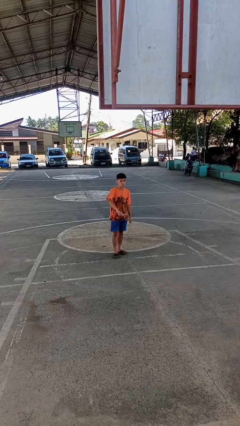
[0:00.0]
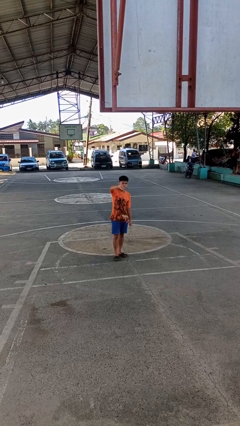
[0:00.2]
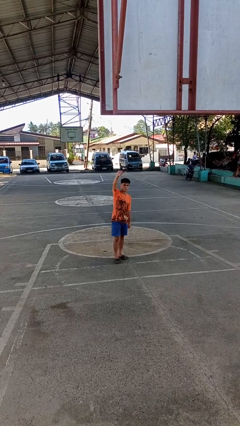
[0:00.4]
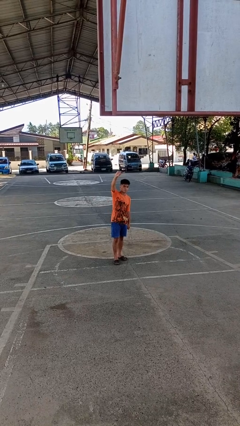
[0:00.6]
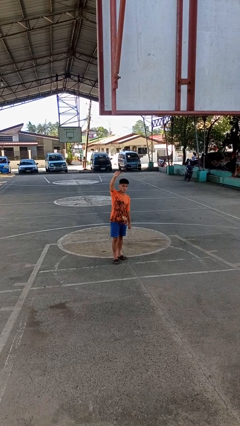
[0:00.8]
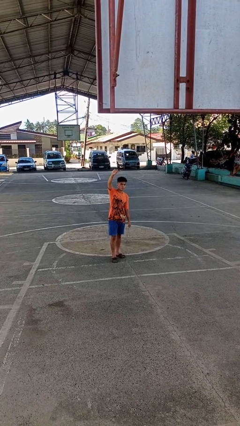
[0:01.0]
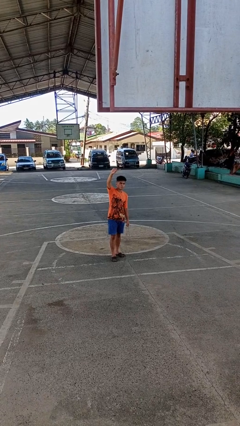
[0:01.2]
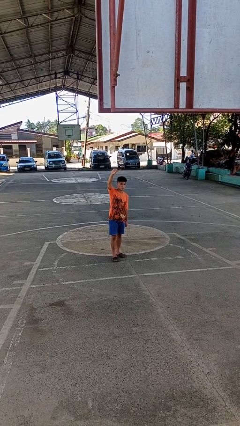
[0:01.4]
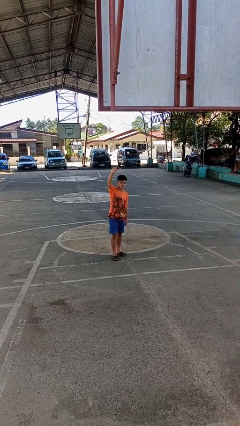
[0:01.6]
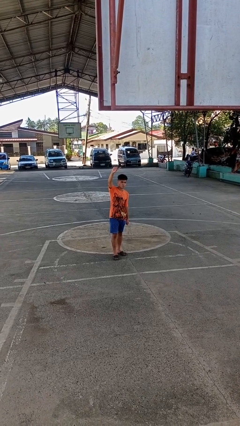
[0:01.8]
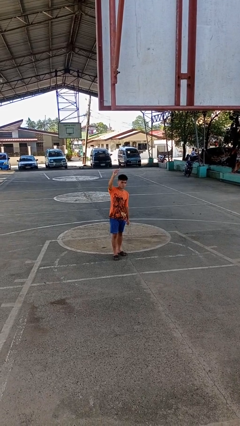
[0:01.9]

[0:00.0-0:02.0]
person gestures swipe up

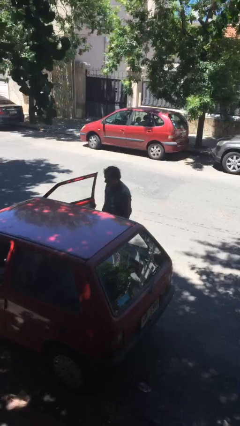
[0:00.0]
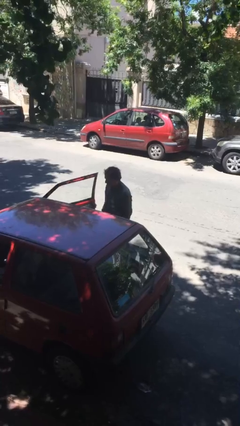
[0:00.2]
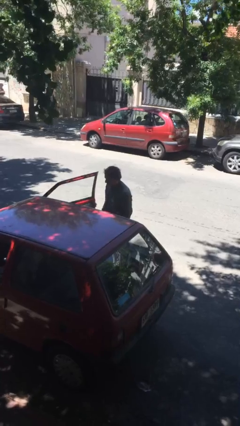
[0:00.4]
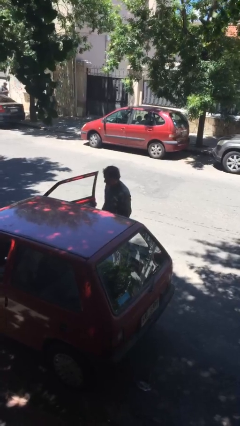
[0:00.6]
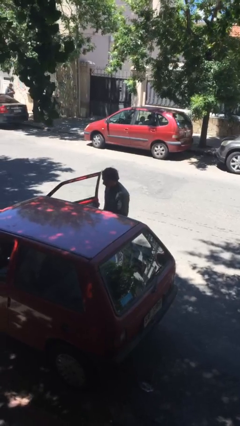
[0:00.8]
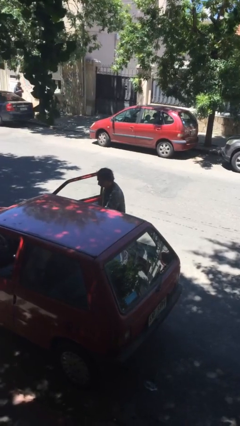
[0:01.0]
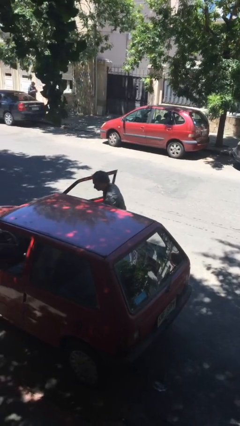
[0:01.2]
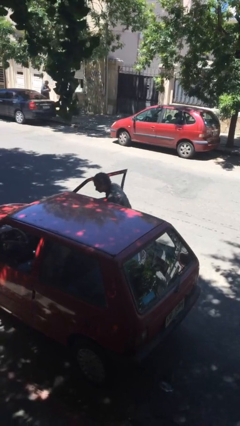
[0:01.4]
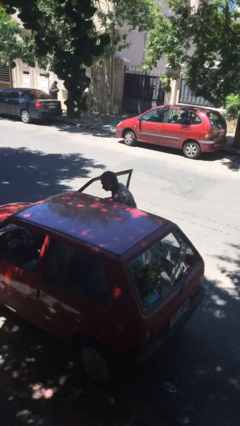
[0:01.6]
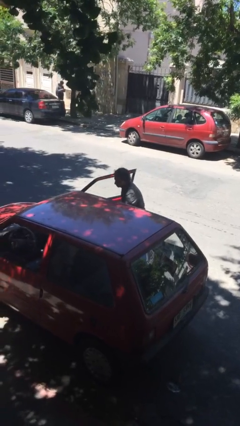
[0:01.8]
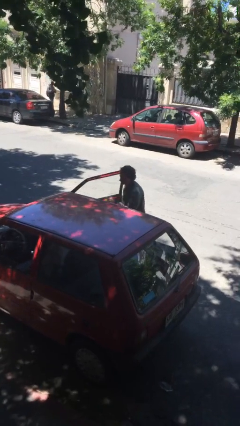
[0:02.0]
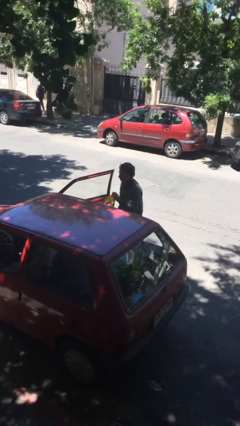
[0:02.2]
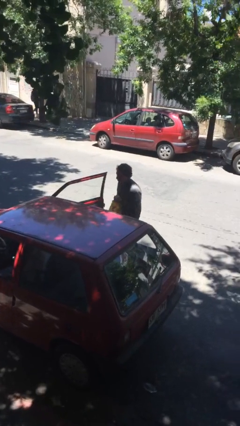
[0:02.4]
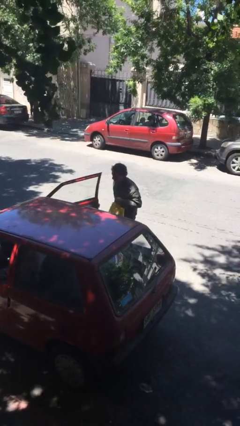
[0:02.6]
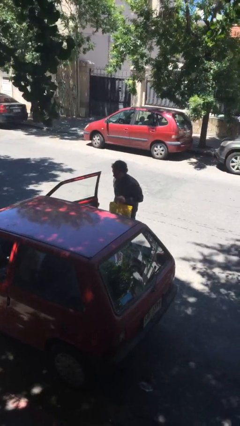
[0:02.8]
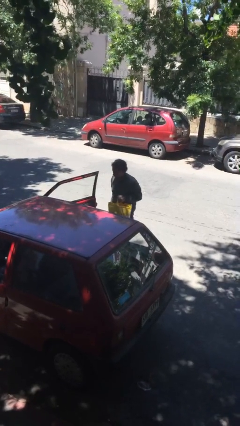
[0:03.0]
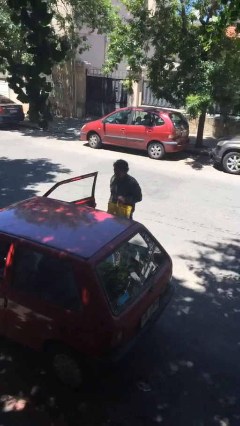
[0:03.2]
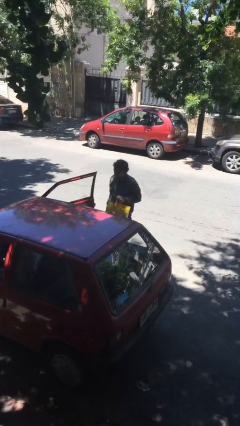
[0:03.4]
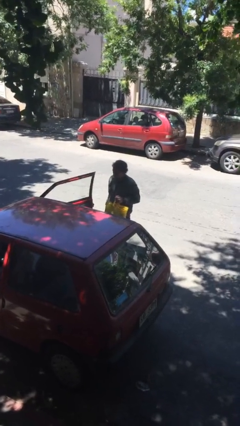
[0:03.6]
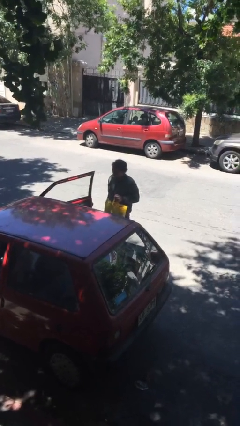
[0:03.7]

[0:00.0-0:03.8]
person unloads car

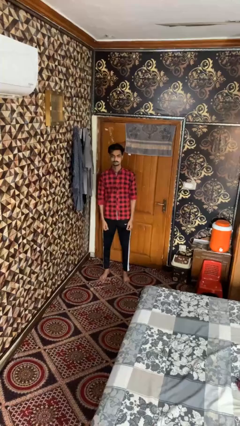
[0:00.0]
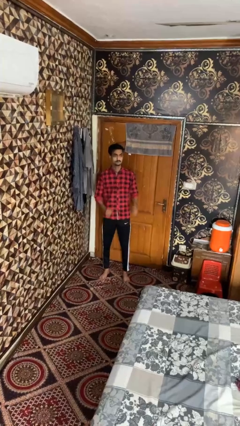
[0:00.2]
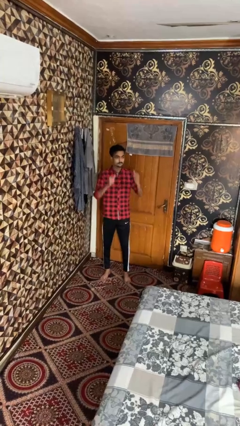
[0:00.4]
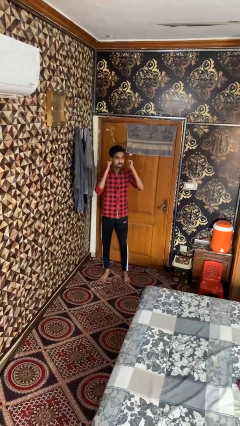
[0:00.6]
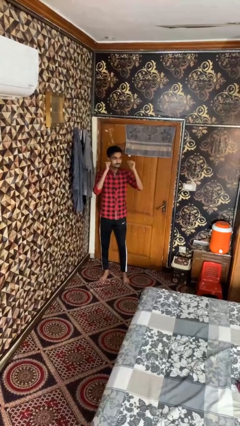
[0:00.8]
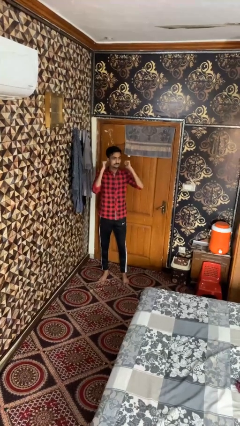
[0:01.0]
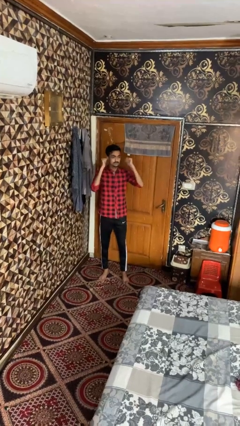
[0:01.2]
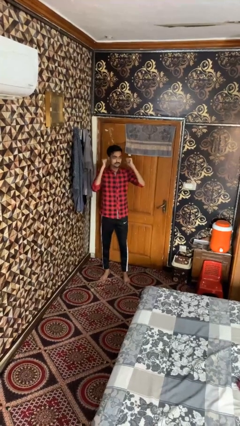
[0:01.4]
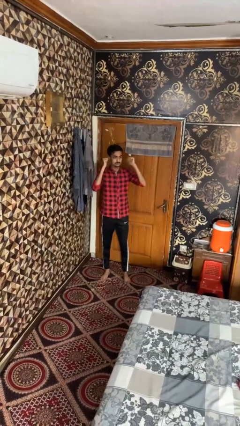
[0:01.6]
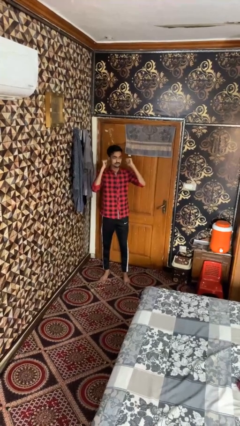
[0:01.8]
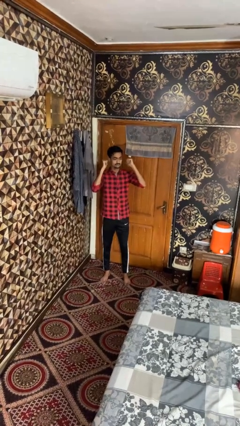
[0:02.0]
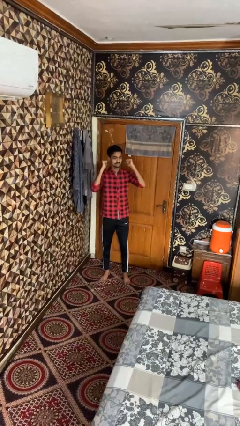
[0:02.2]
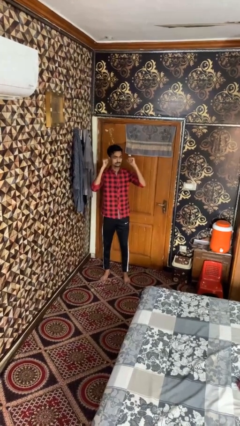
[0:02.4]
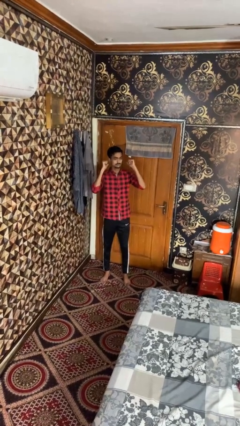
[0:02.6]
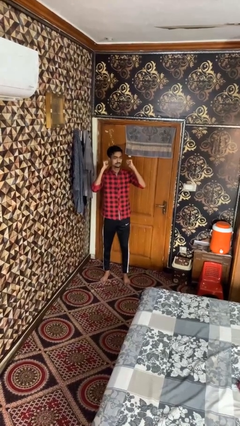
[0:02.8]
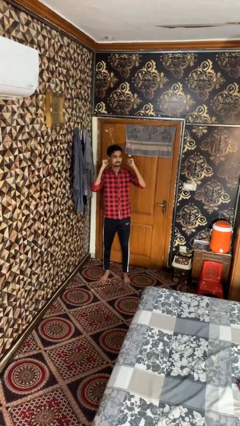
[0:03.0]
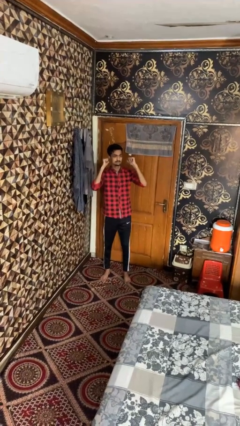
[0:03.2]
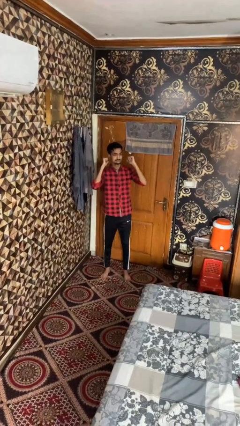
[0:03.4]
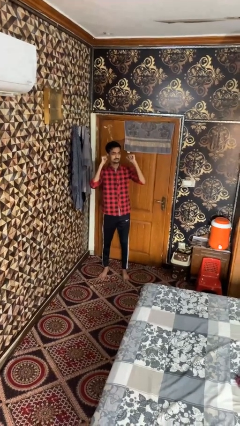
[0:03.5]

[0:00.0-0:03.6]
person gestures behind me

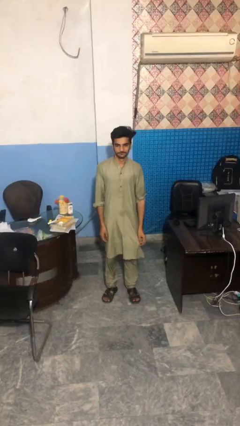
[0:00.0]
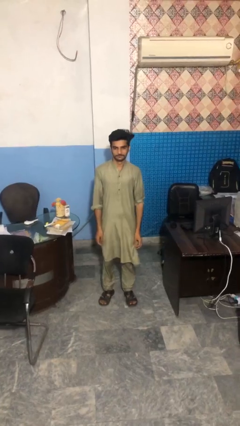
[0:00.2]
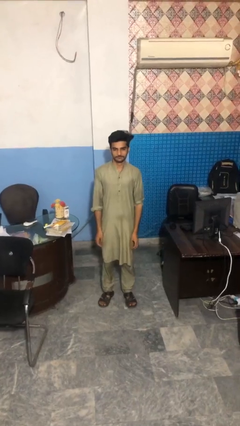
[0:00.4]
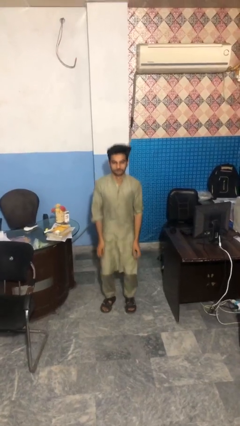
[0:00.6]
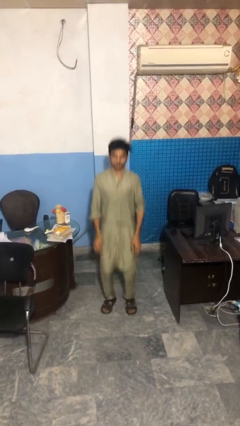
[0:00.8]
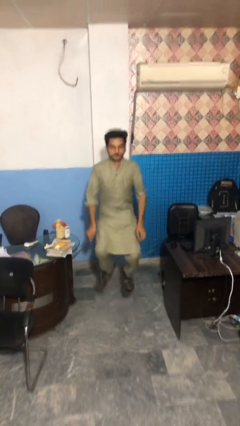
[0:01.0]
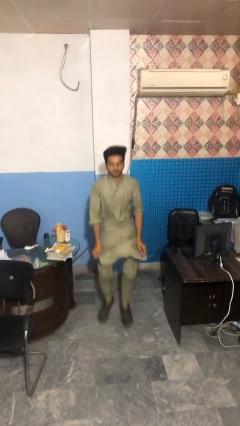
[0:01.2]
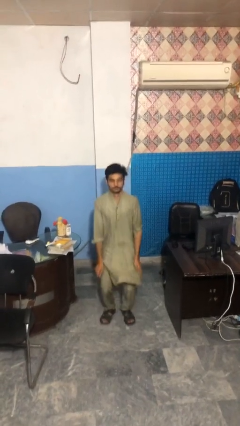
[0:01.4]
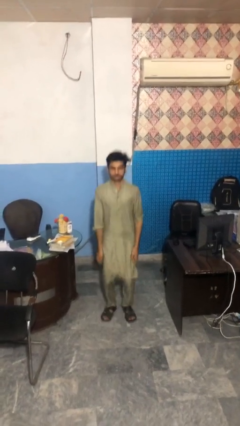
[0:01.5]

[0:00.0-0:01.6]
person jumps

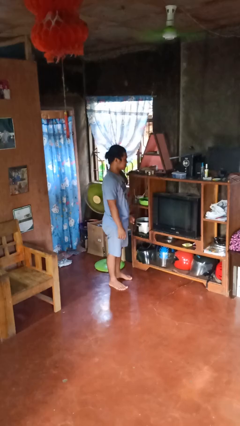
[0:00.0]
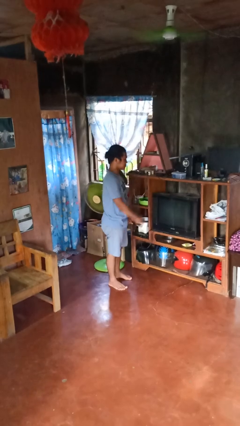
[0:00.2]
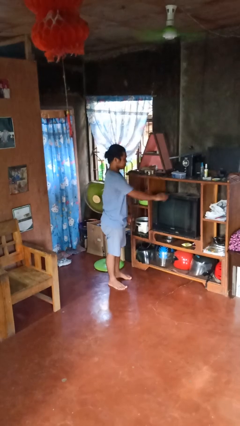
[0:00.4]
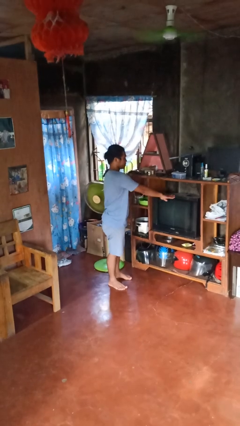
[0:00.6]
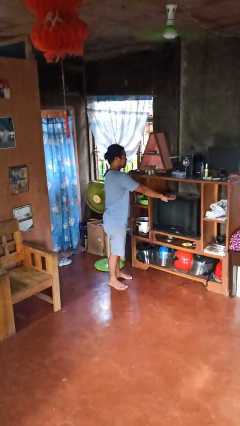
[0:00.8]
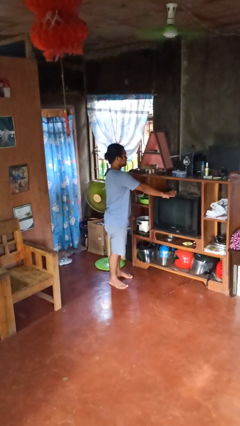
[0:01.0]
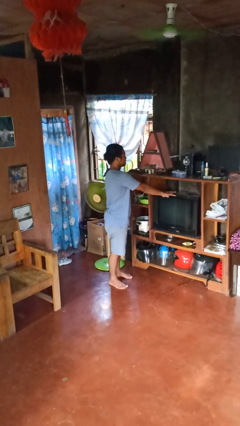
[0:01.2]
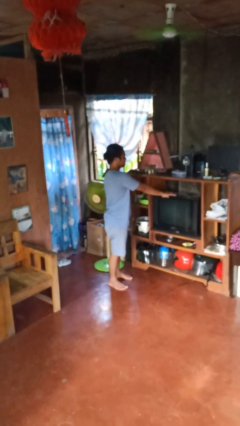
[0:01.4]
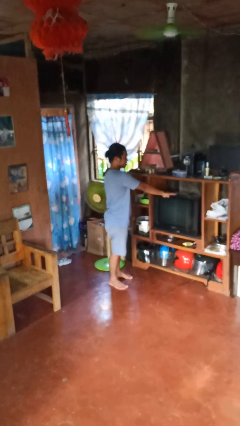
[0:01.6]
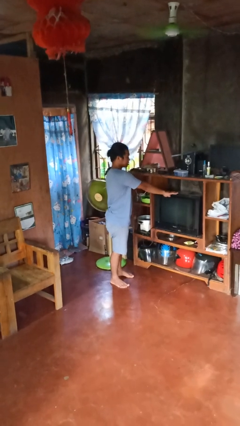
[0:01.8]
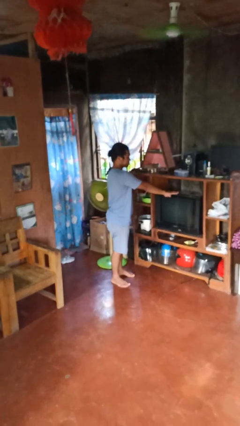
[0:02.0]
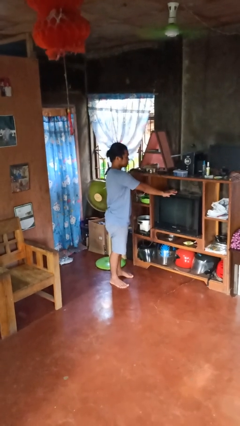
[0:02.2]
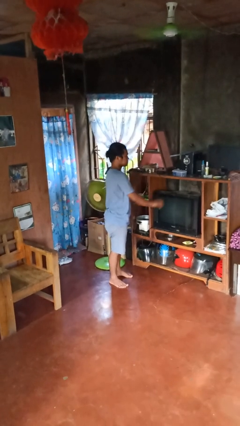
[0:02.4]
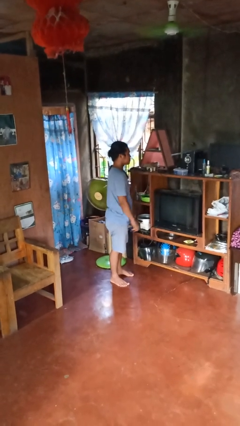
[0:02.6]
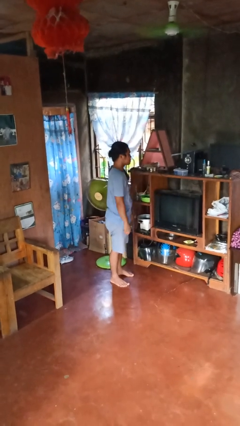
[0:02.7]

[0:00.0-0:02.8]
person taps object with finger

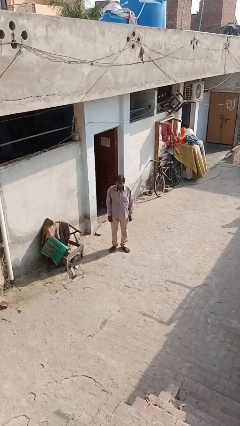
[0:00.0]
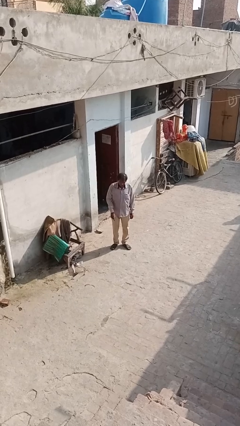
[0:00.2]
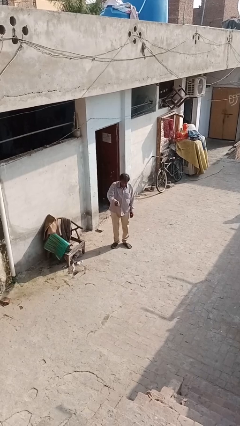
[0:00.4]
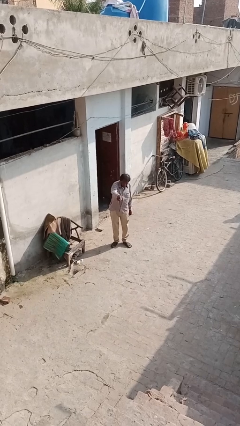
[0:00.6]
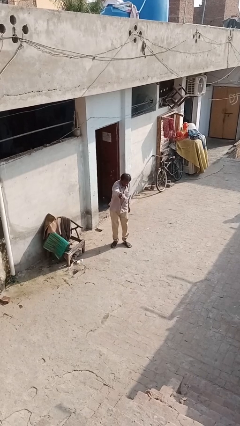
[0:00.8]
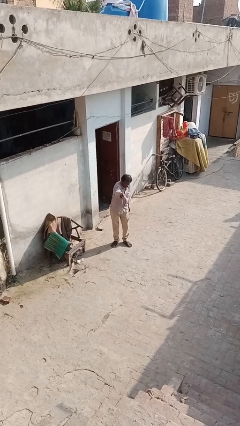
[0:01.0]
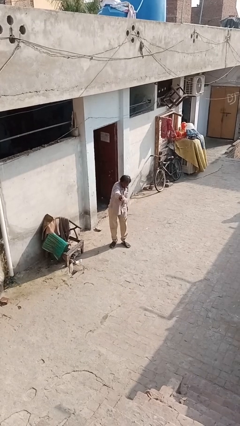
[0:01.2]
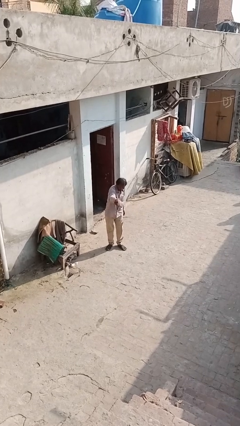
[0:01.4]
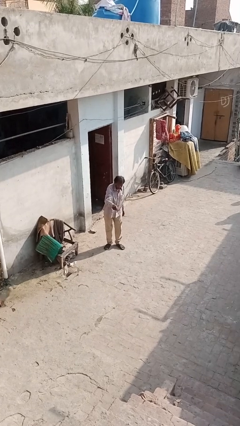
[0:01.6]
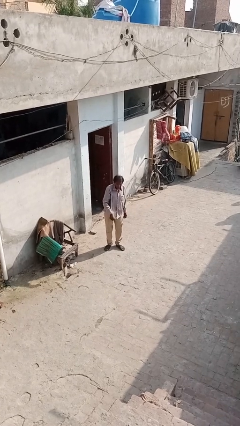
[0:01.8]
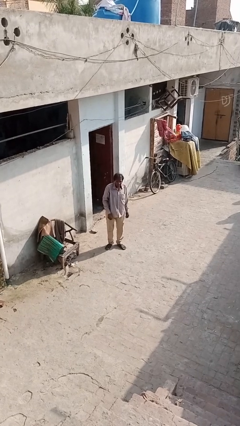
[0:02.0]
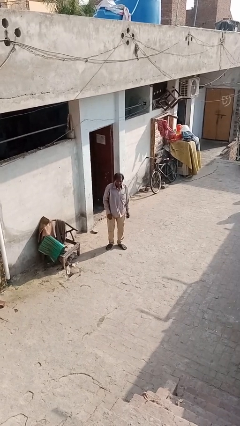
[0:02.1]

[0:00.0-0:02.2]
person points at person

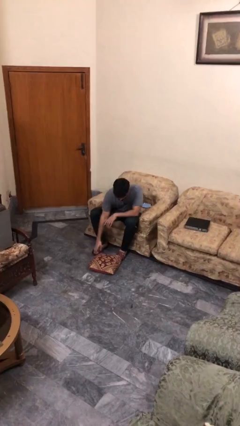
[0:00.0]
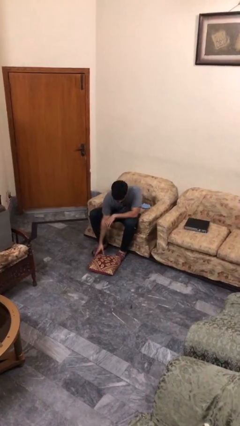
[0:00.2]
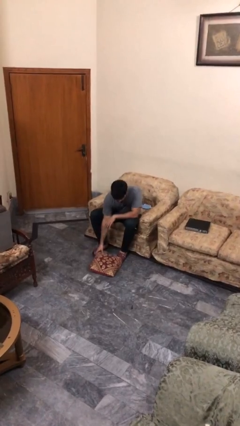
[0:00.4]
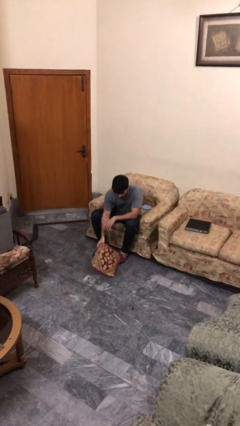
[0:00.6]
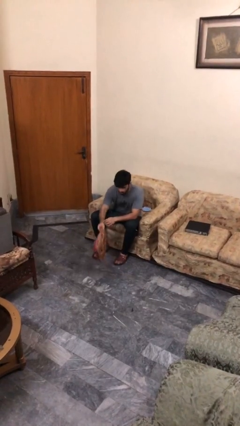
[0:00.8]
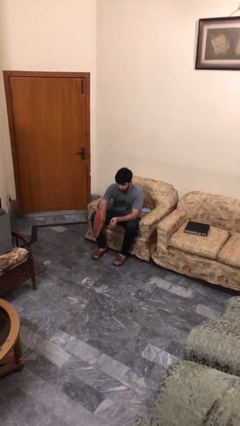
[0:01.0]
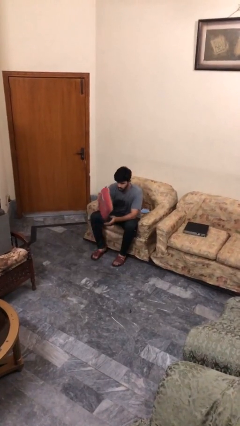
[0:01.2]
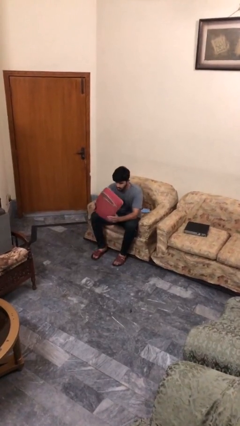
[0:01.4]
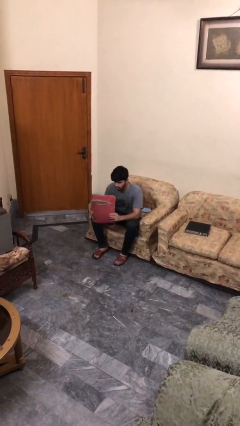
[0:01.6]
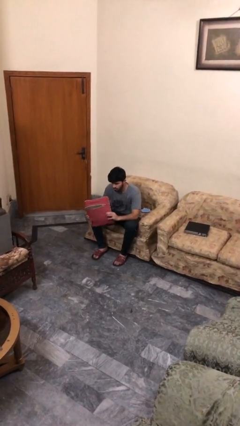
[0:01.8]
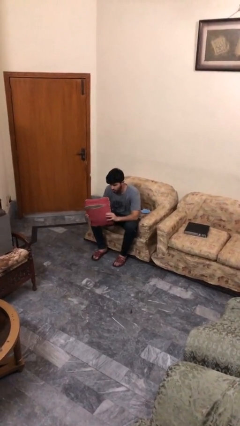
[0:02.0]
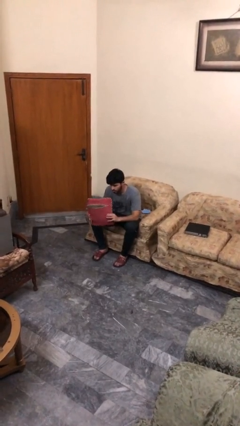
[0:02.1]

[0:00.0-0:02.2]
person picks up object from floor
